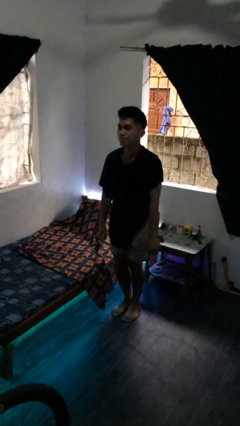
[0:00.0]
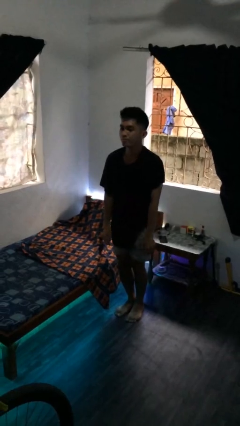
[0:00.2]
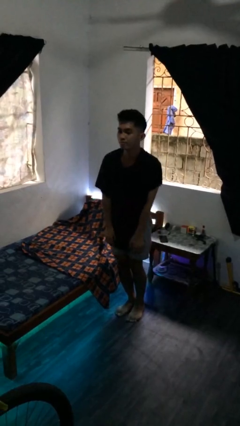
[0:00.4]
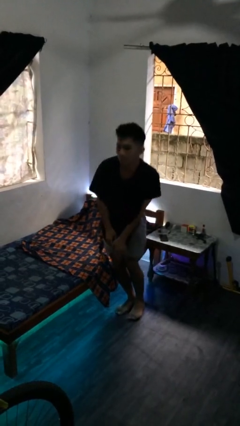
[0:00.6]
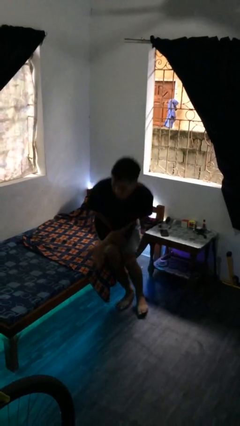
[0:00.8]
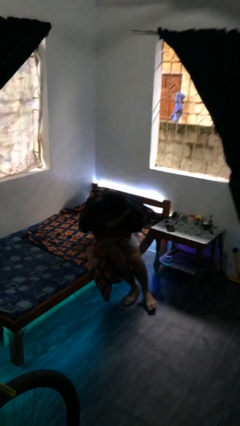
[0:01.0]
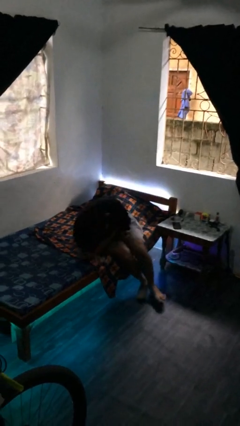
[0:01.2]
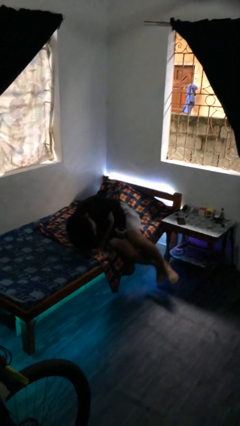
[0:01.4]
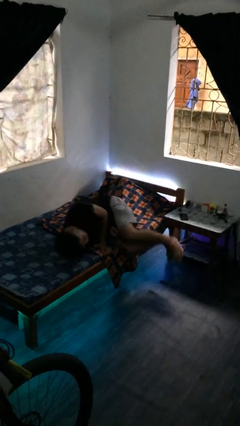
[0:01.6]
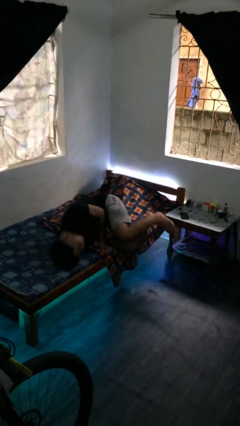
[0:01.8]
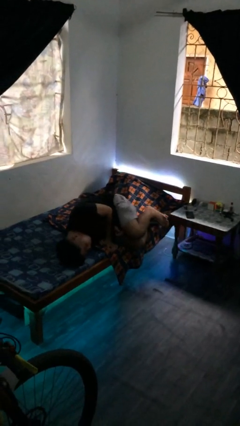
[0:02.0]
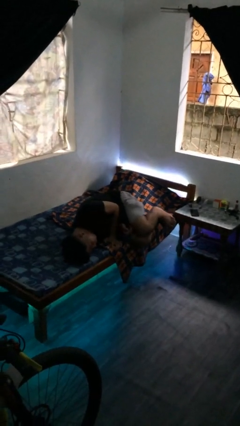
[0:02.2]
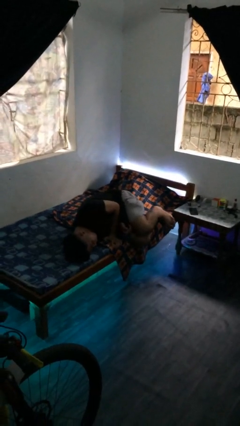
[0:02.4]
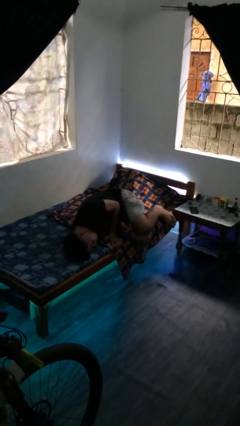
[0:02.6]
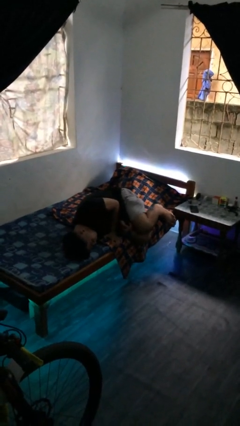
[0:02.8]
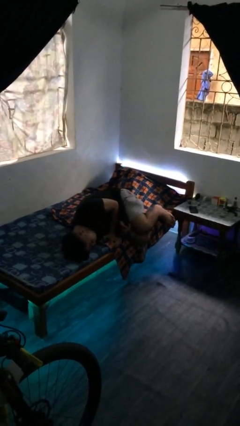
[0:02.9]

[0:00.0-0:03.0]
person lies down on bed

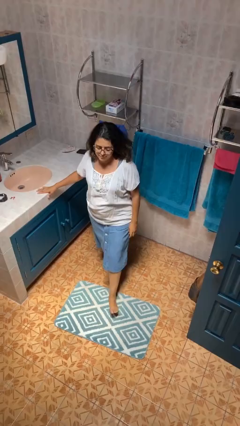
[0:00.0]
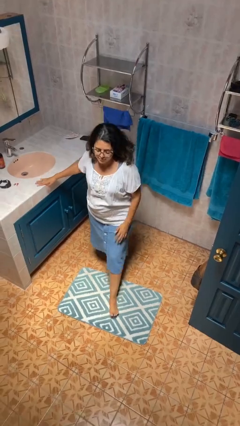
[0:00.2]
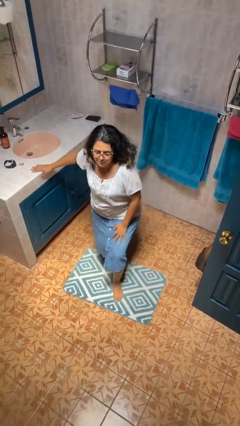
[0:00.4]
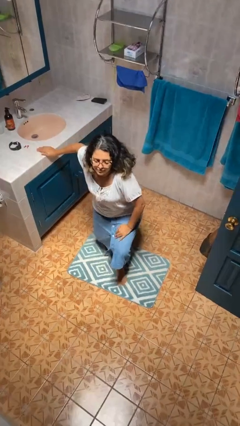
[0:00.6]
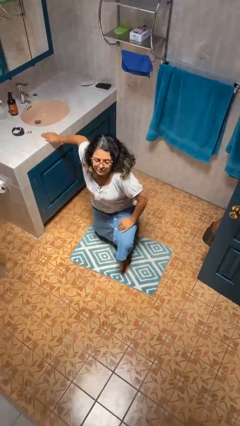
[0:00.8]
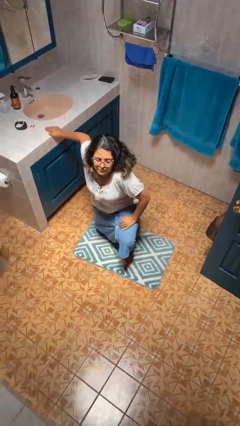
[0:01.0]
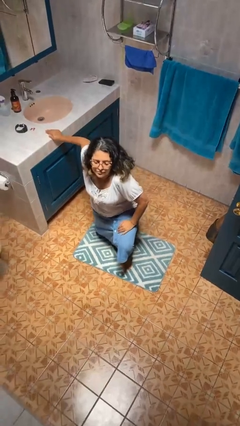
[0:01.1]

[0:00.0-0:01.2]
person kneels

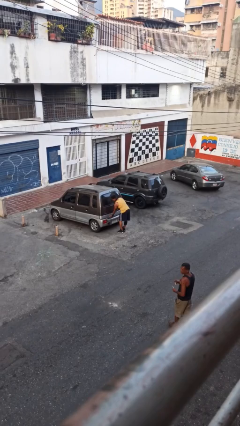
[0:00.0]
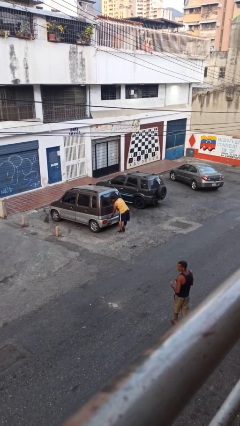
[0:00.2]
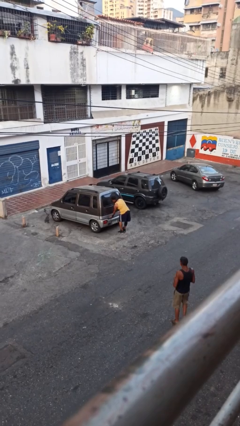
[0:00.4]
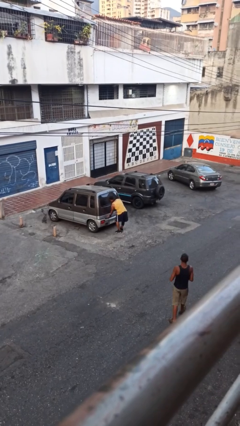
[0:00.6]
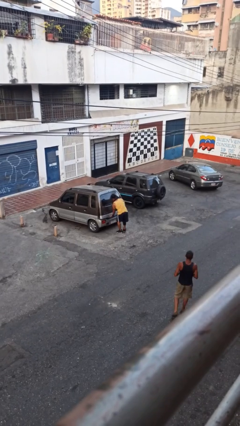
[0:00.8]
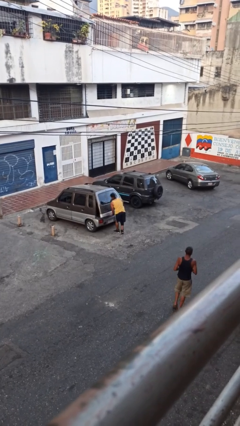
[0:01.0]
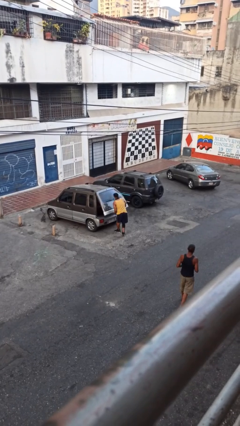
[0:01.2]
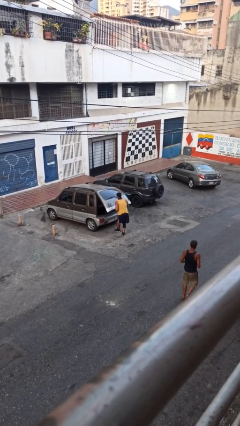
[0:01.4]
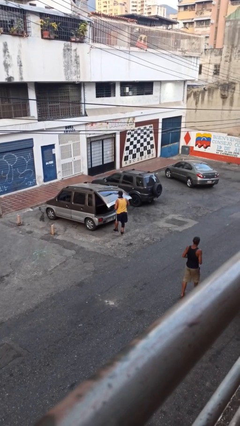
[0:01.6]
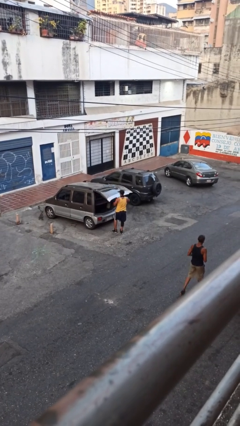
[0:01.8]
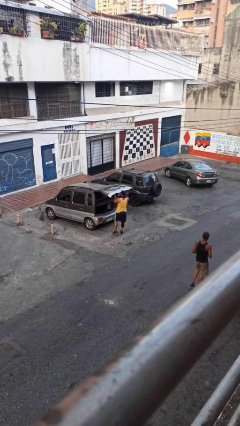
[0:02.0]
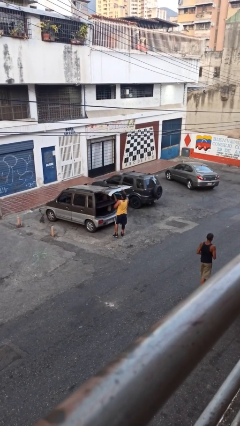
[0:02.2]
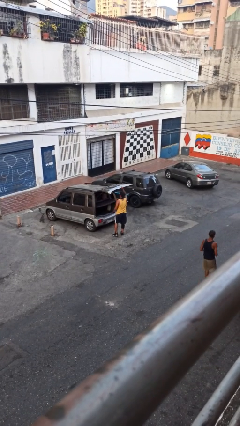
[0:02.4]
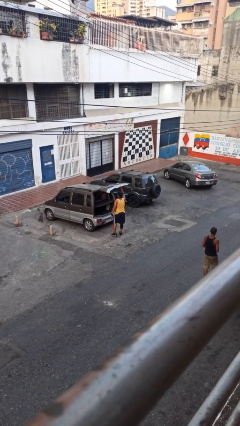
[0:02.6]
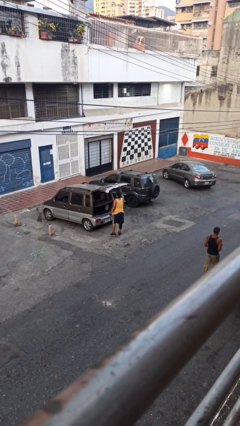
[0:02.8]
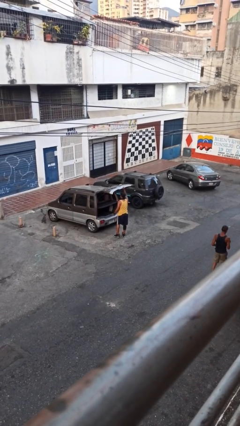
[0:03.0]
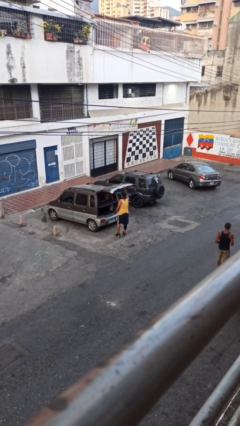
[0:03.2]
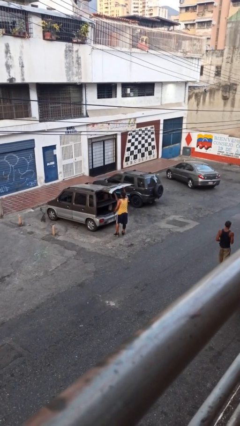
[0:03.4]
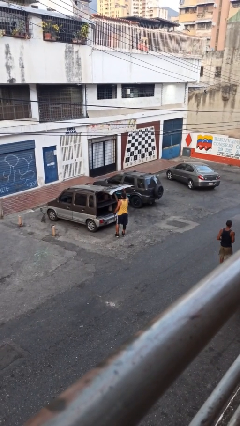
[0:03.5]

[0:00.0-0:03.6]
person opens car trunk

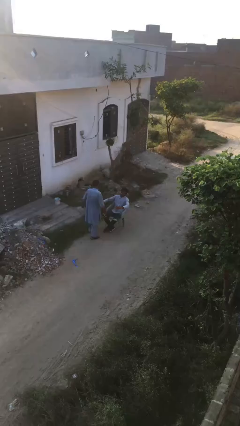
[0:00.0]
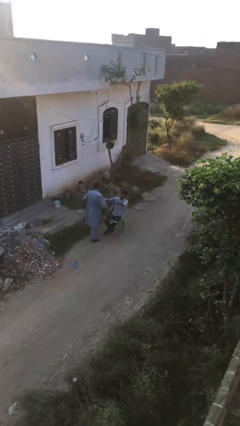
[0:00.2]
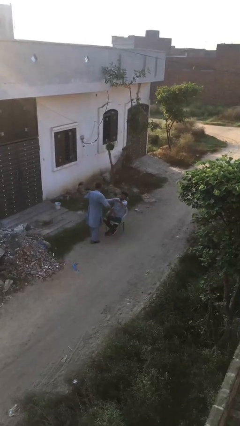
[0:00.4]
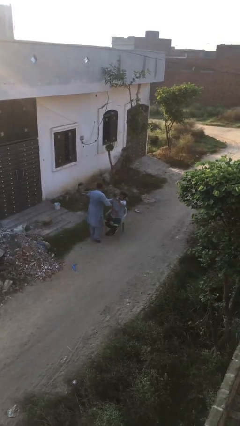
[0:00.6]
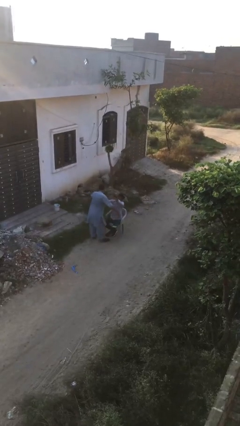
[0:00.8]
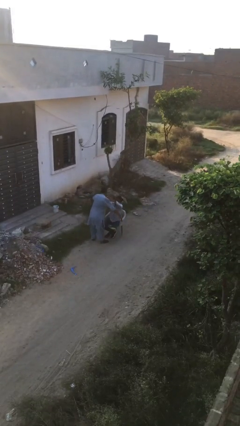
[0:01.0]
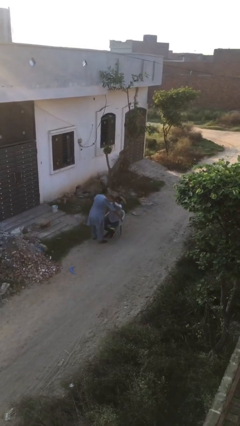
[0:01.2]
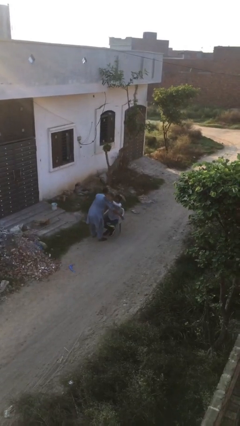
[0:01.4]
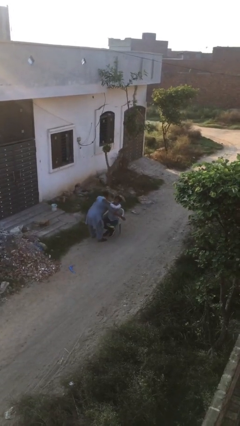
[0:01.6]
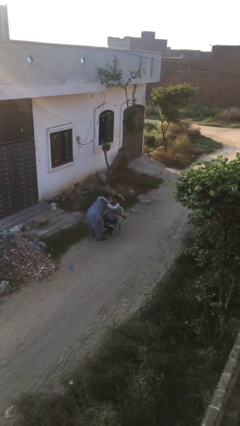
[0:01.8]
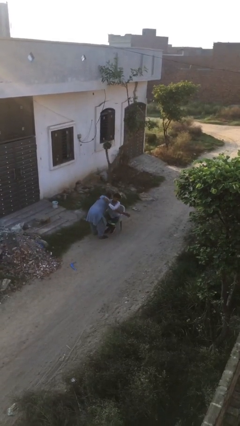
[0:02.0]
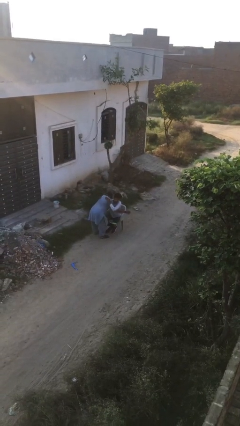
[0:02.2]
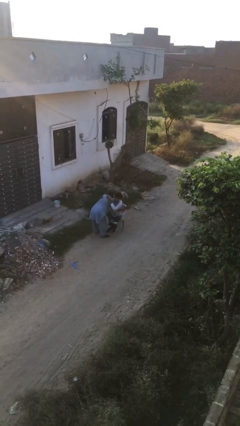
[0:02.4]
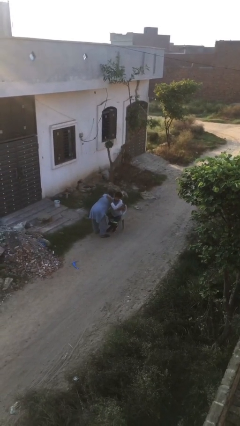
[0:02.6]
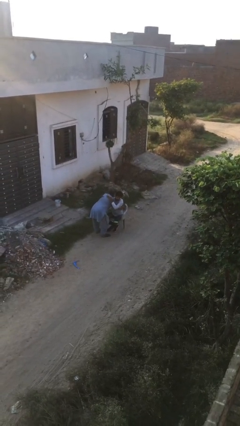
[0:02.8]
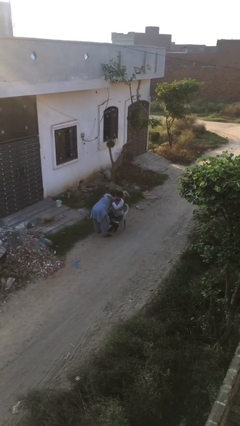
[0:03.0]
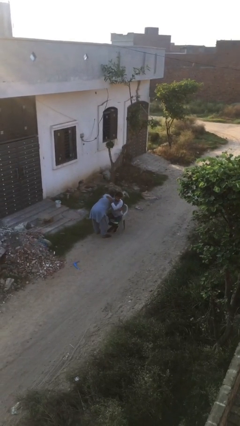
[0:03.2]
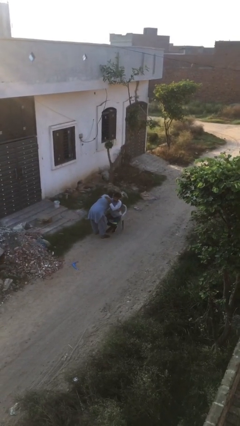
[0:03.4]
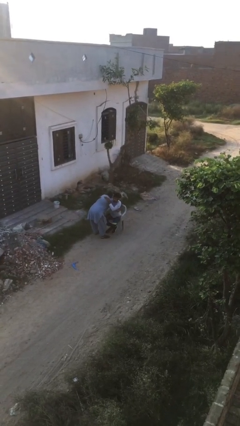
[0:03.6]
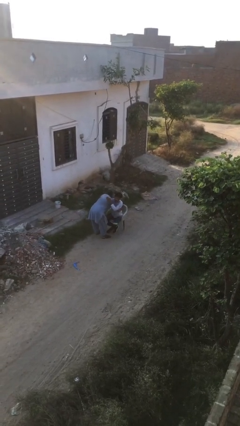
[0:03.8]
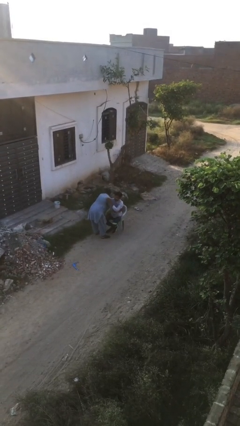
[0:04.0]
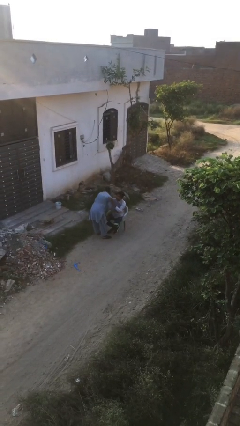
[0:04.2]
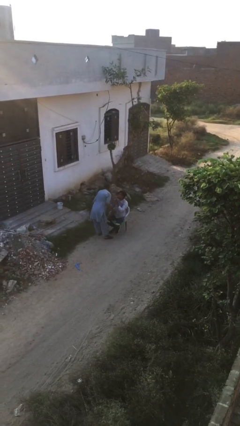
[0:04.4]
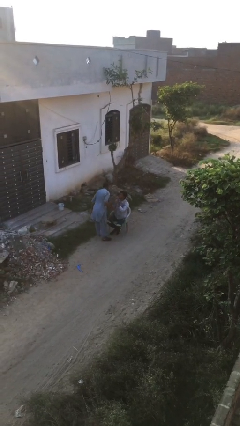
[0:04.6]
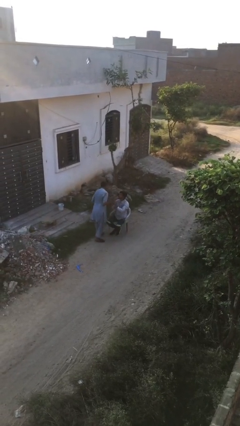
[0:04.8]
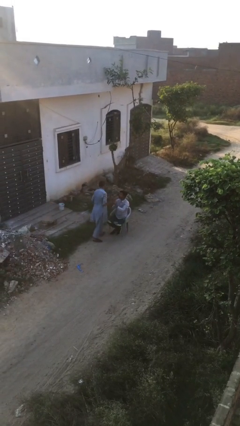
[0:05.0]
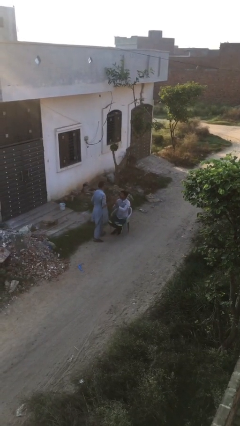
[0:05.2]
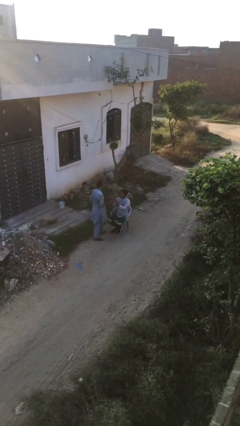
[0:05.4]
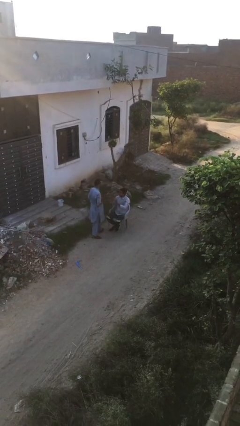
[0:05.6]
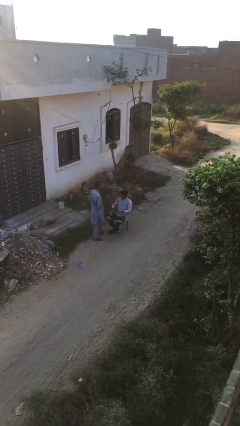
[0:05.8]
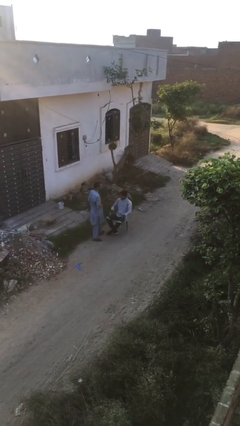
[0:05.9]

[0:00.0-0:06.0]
person embraces person

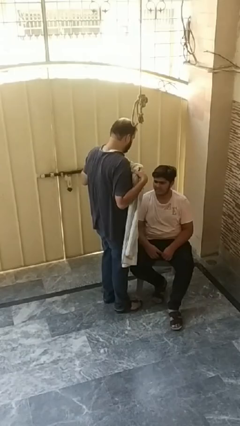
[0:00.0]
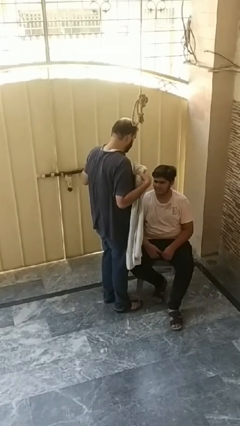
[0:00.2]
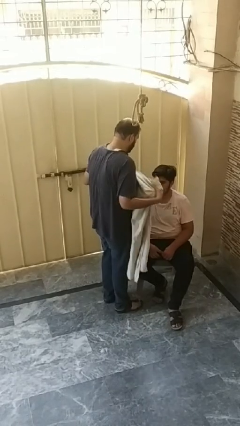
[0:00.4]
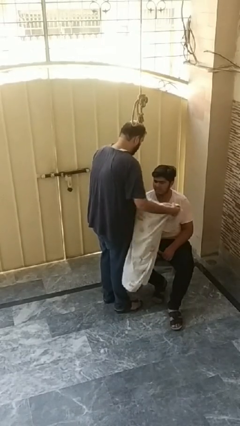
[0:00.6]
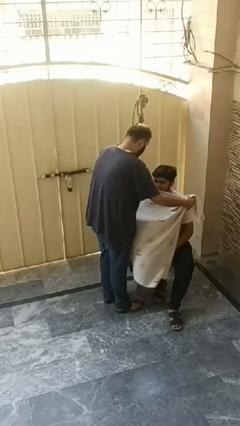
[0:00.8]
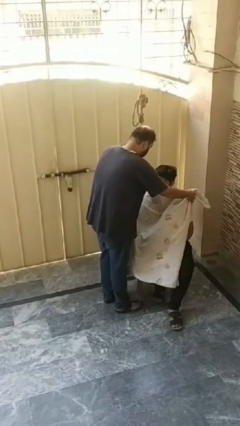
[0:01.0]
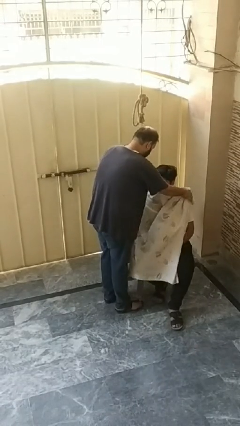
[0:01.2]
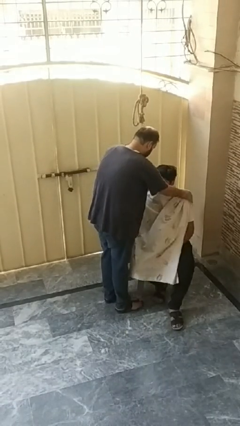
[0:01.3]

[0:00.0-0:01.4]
person covers friend with blanket

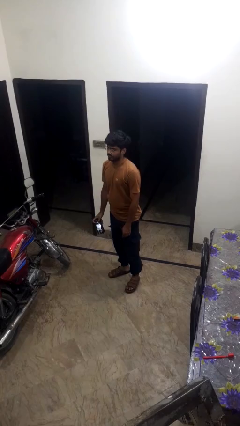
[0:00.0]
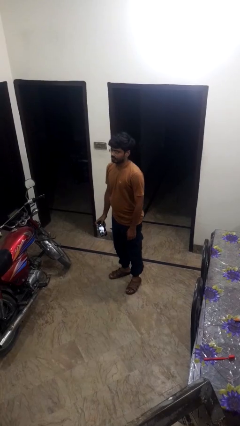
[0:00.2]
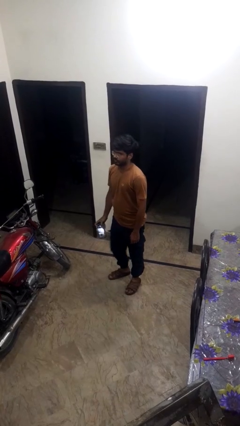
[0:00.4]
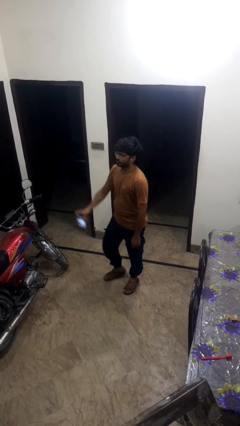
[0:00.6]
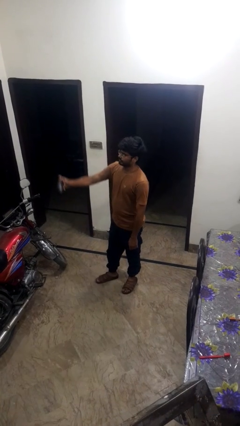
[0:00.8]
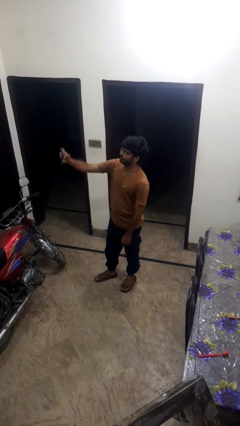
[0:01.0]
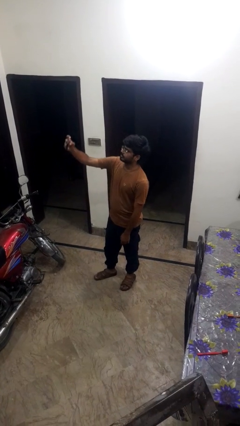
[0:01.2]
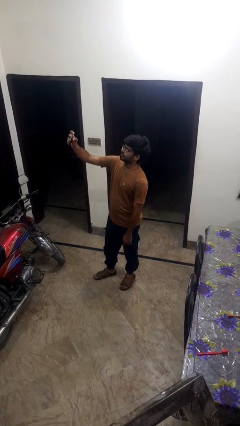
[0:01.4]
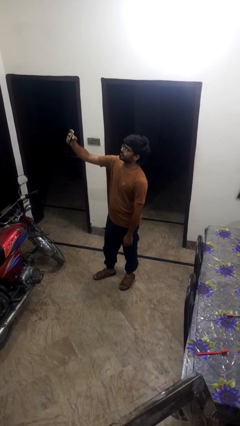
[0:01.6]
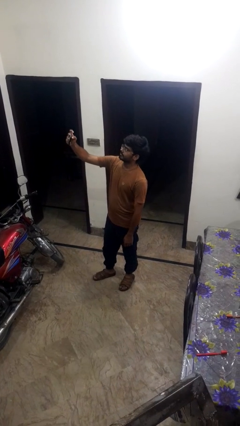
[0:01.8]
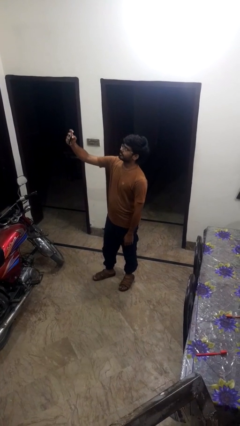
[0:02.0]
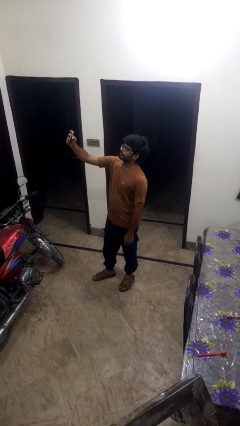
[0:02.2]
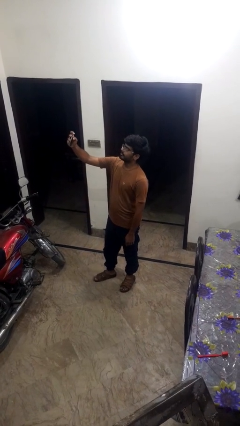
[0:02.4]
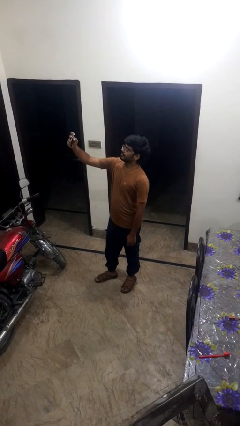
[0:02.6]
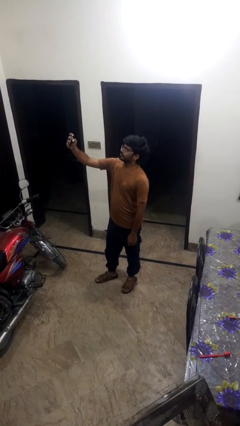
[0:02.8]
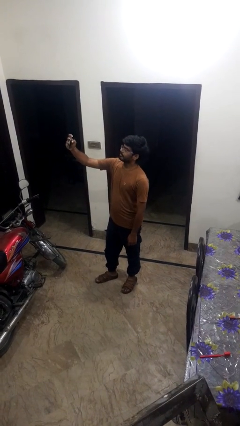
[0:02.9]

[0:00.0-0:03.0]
person takes selfie
